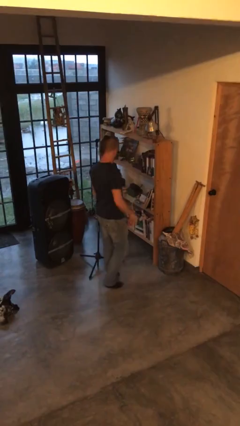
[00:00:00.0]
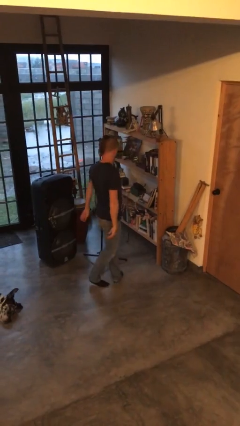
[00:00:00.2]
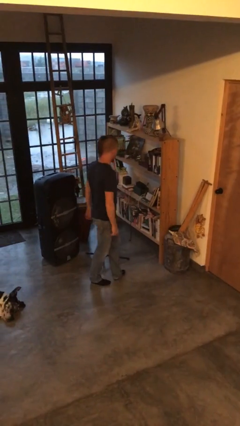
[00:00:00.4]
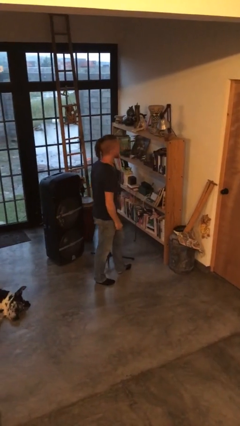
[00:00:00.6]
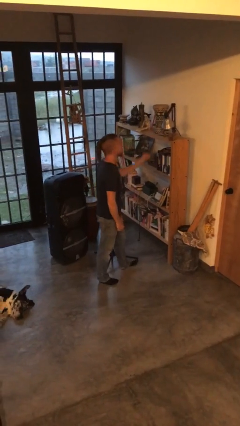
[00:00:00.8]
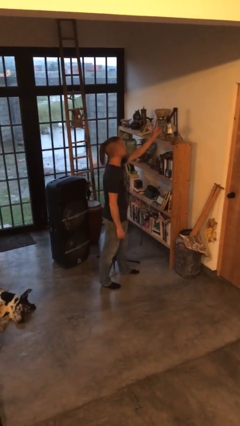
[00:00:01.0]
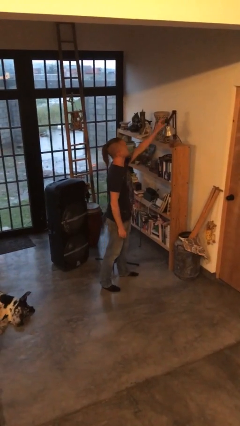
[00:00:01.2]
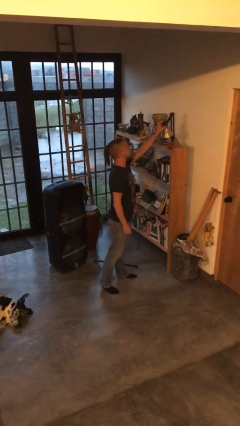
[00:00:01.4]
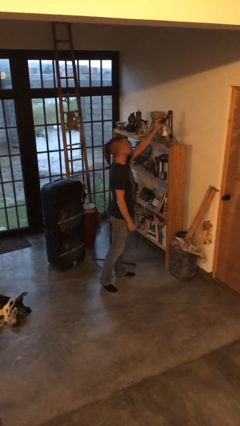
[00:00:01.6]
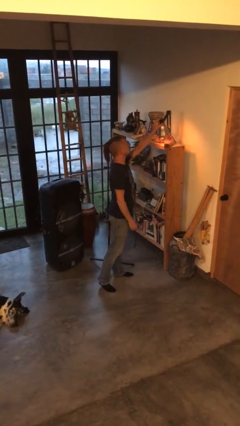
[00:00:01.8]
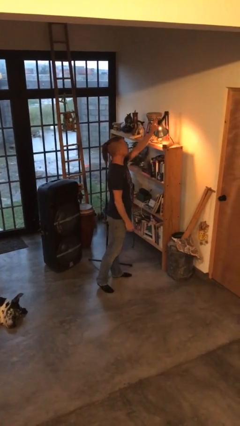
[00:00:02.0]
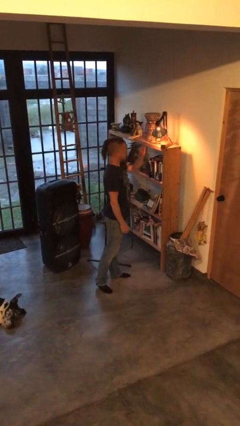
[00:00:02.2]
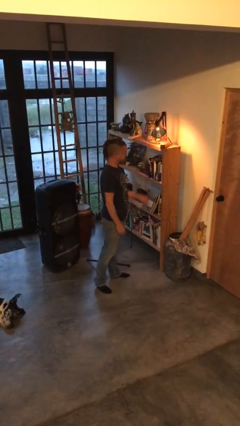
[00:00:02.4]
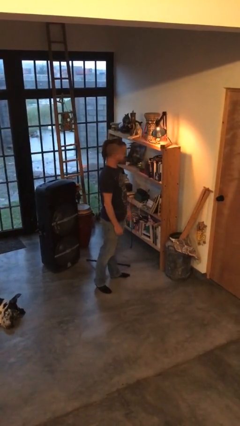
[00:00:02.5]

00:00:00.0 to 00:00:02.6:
person turns on lamp

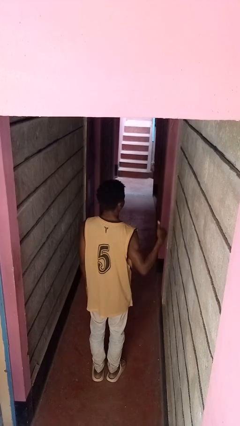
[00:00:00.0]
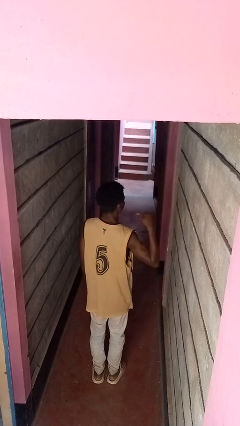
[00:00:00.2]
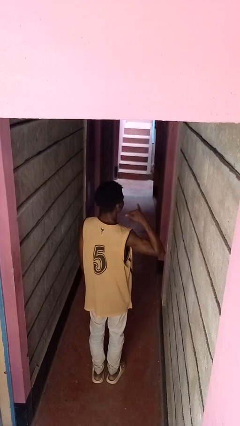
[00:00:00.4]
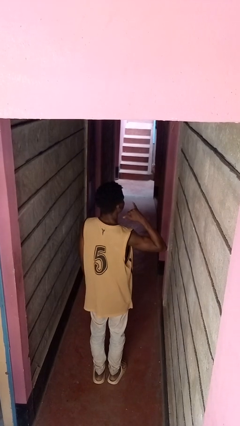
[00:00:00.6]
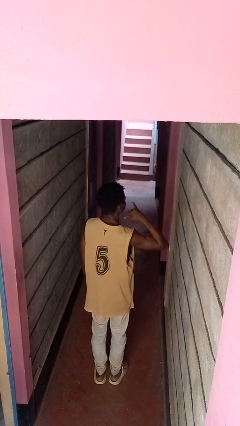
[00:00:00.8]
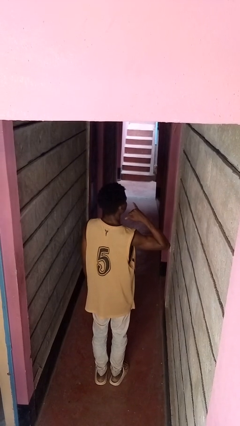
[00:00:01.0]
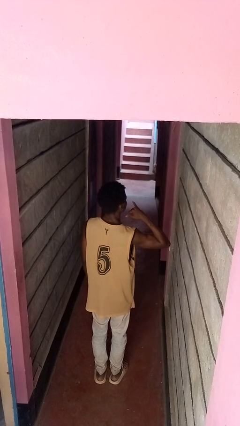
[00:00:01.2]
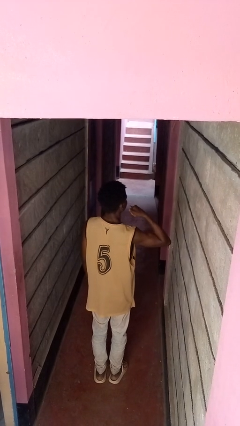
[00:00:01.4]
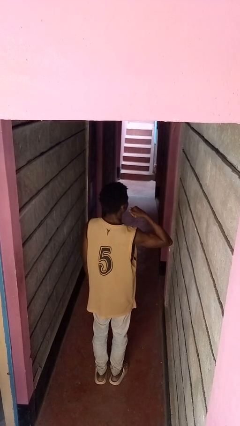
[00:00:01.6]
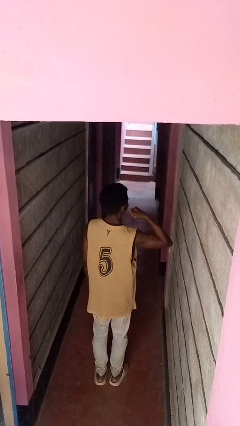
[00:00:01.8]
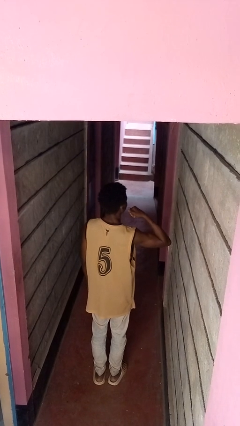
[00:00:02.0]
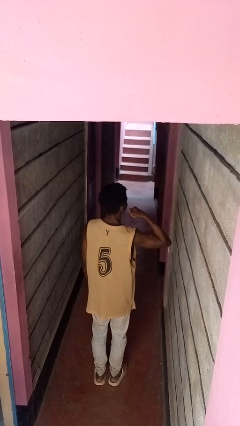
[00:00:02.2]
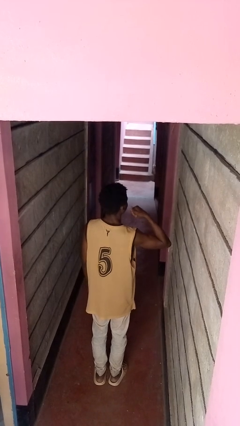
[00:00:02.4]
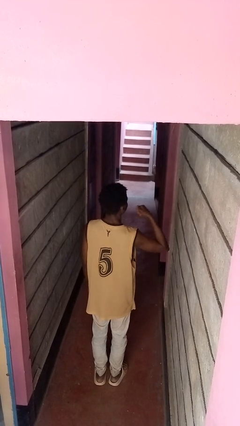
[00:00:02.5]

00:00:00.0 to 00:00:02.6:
person gestures call me

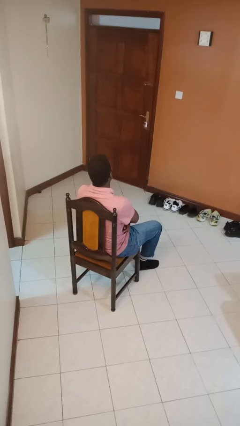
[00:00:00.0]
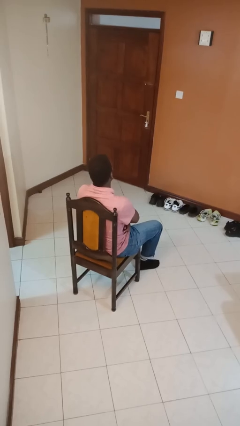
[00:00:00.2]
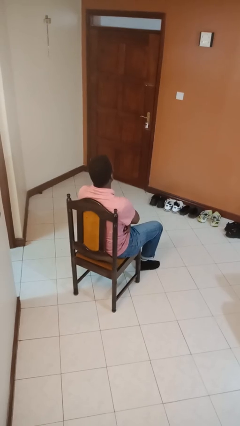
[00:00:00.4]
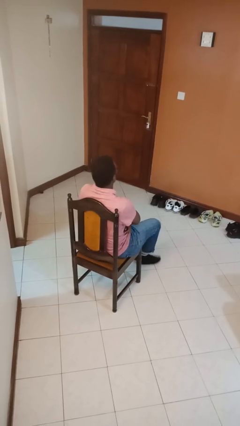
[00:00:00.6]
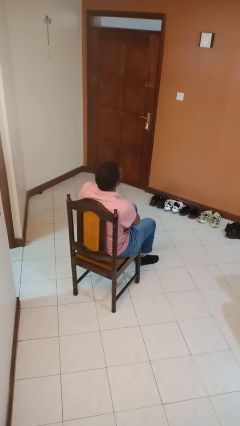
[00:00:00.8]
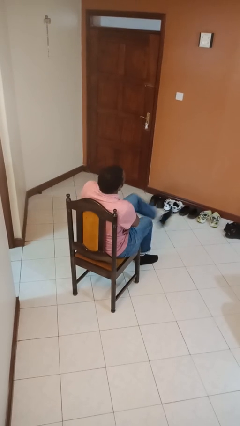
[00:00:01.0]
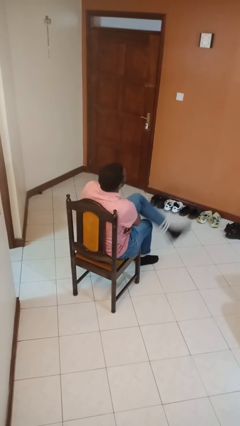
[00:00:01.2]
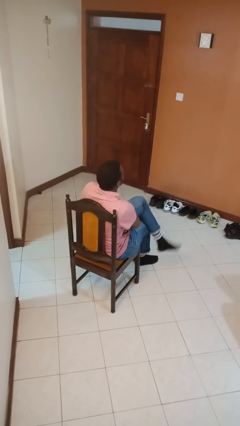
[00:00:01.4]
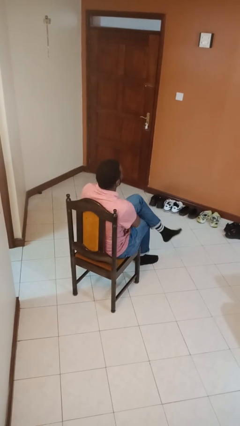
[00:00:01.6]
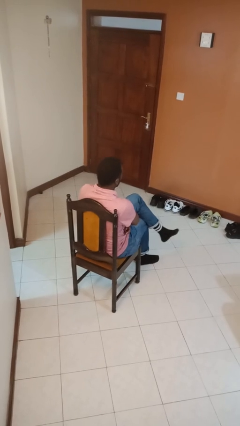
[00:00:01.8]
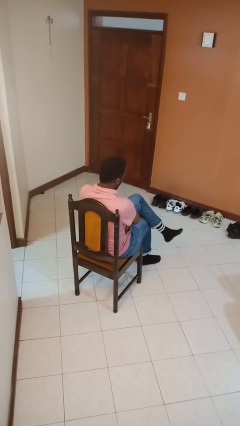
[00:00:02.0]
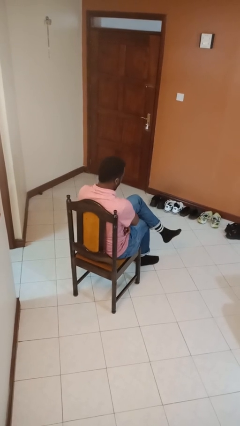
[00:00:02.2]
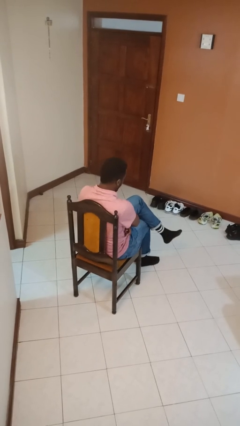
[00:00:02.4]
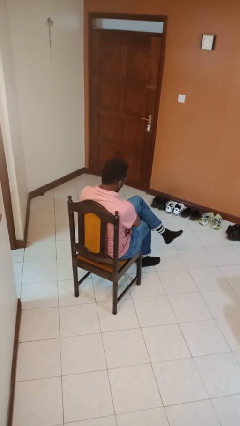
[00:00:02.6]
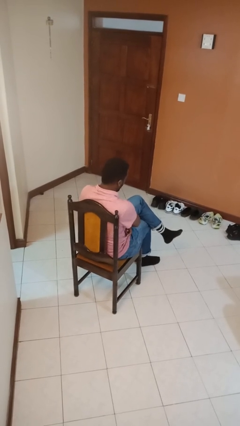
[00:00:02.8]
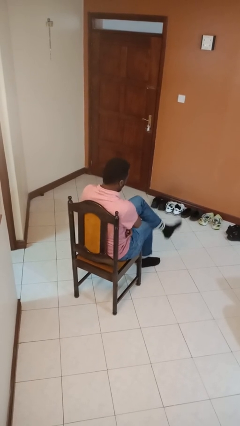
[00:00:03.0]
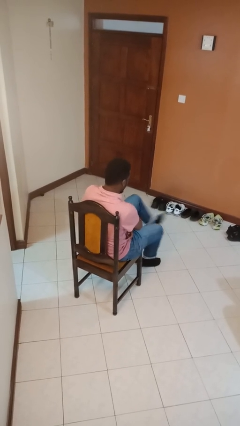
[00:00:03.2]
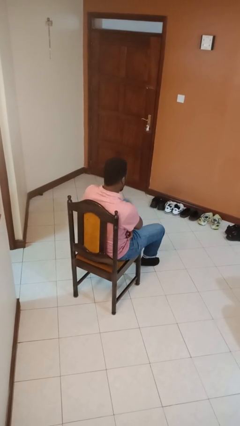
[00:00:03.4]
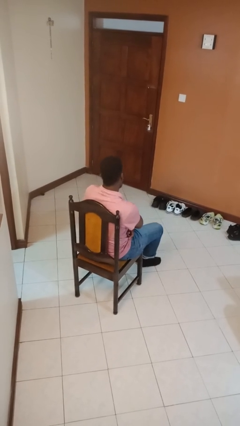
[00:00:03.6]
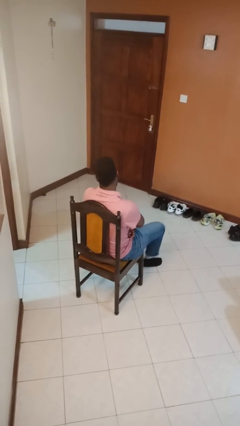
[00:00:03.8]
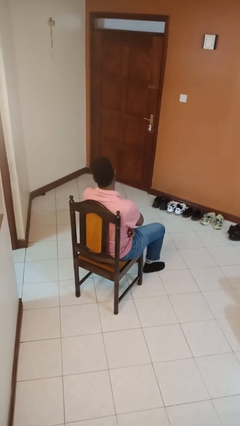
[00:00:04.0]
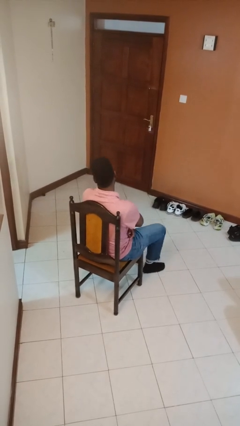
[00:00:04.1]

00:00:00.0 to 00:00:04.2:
person crosses legs

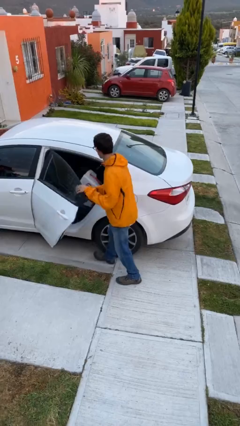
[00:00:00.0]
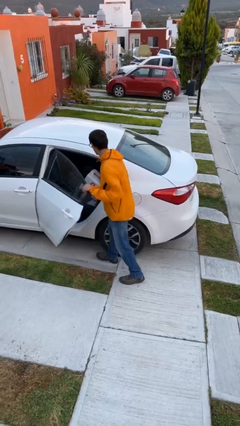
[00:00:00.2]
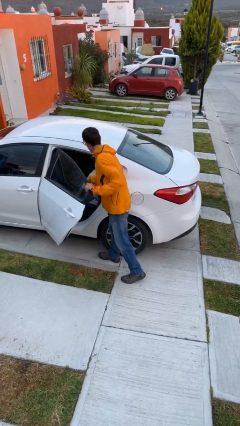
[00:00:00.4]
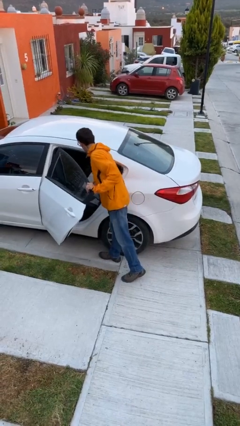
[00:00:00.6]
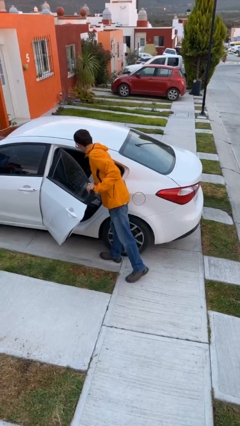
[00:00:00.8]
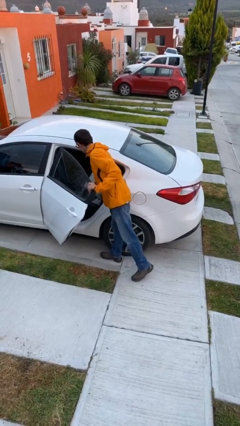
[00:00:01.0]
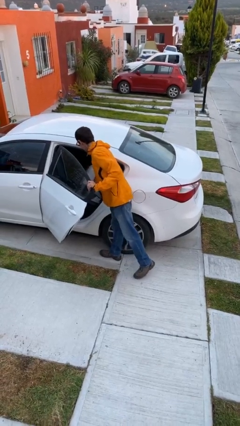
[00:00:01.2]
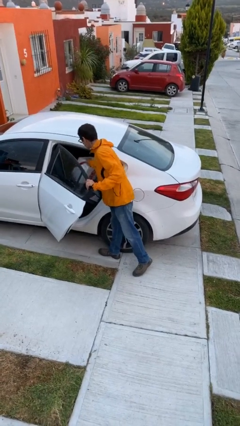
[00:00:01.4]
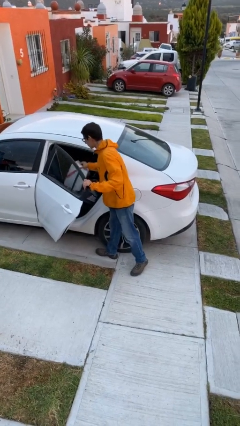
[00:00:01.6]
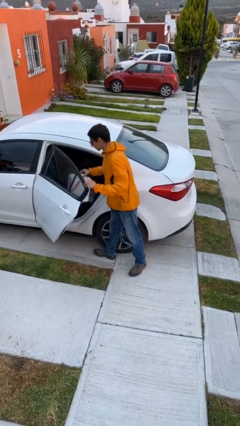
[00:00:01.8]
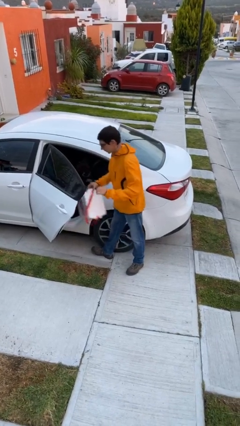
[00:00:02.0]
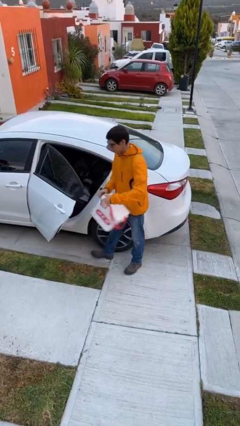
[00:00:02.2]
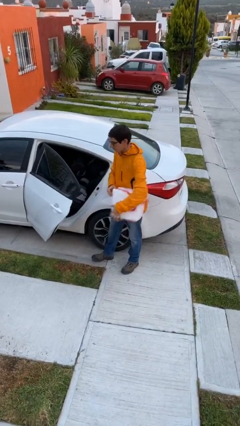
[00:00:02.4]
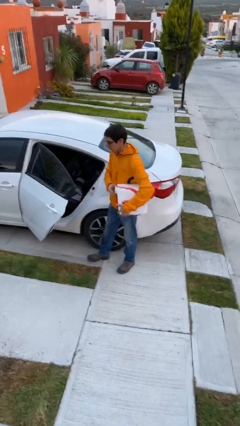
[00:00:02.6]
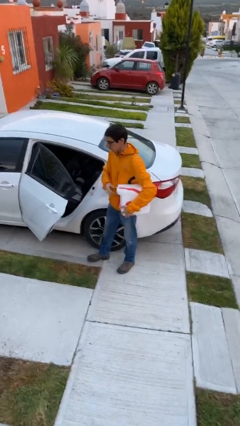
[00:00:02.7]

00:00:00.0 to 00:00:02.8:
person unloads car

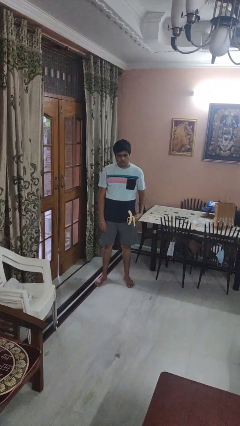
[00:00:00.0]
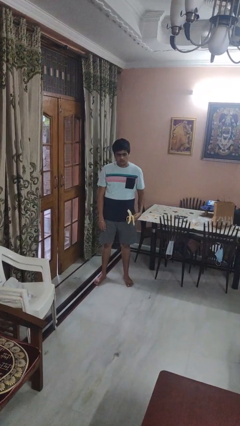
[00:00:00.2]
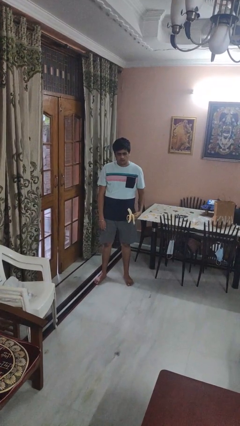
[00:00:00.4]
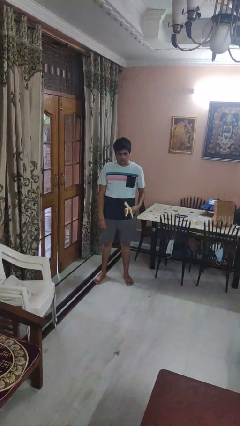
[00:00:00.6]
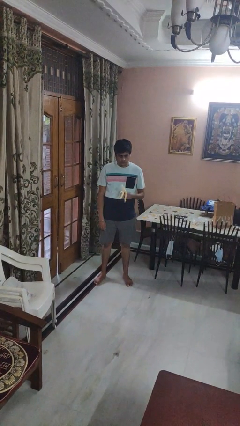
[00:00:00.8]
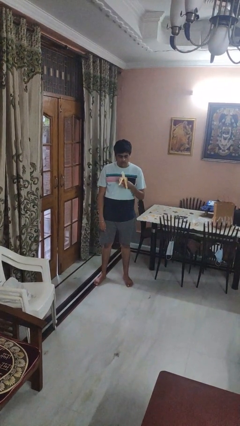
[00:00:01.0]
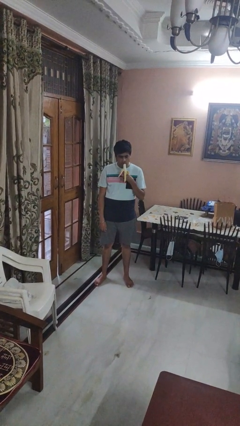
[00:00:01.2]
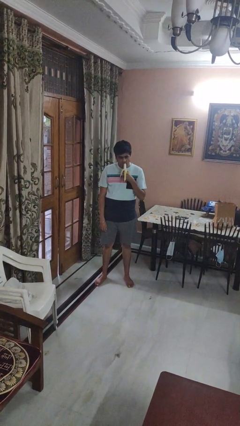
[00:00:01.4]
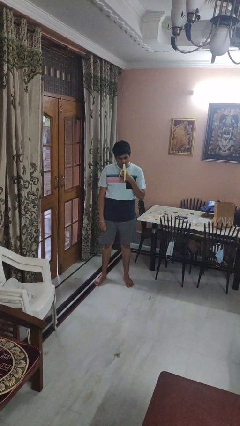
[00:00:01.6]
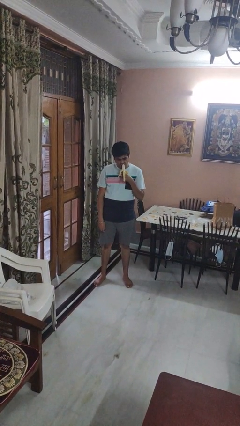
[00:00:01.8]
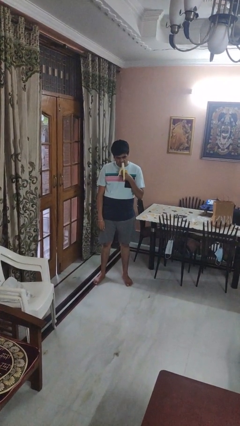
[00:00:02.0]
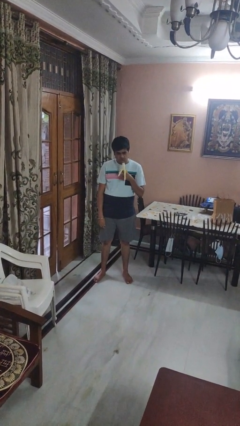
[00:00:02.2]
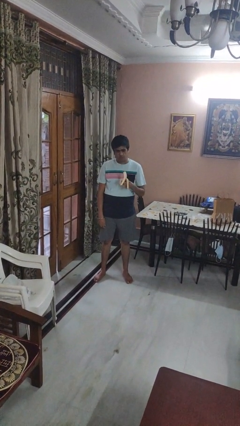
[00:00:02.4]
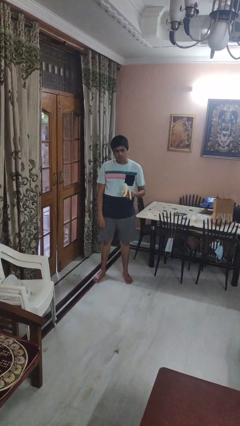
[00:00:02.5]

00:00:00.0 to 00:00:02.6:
person eats banana

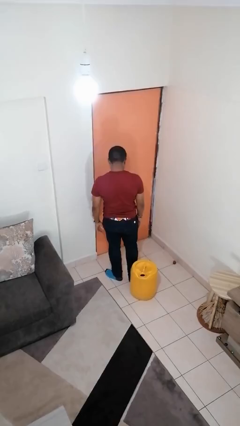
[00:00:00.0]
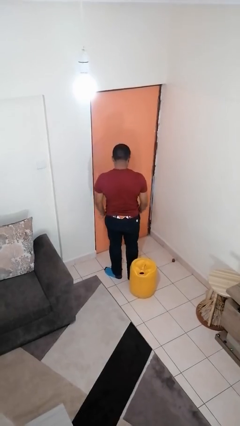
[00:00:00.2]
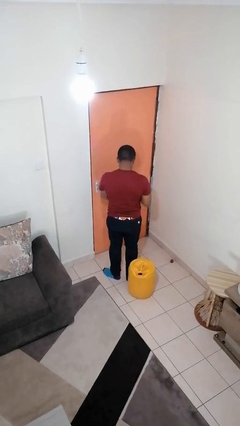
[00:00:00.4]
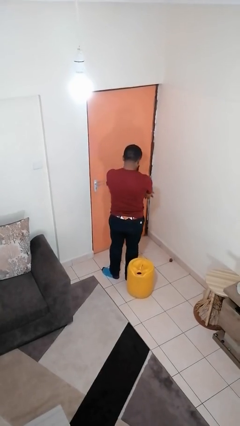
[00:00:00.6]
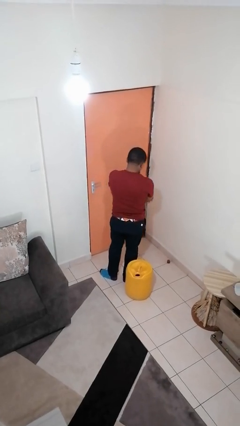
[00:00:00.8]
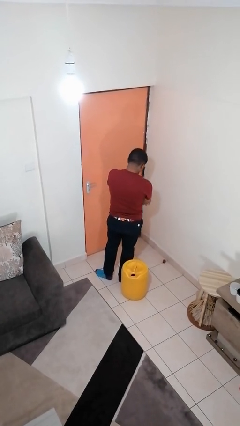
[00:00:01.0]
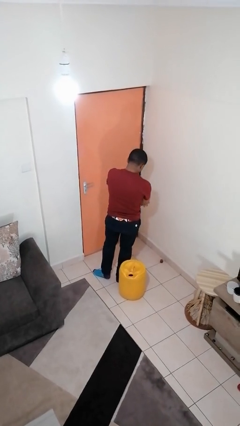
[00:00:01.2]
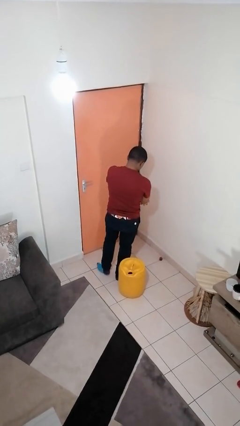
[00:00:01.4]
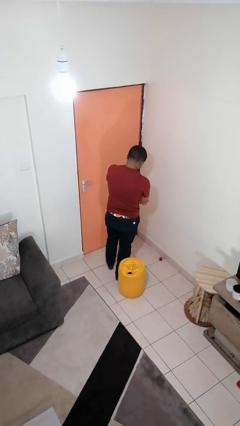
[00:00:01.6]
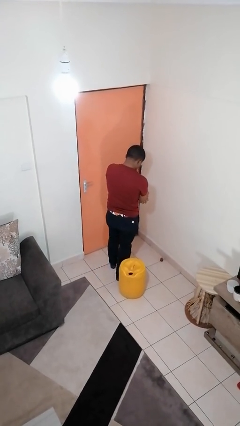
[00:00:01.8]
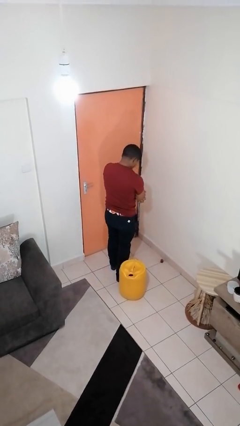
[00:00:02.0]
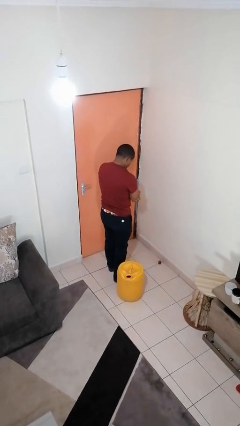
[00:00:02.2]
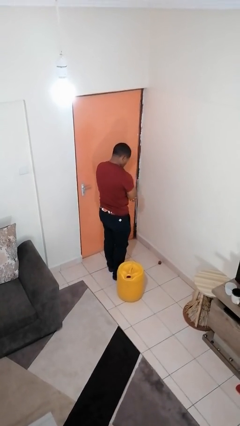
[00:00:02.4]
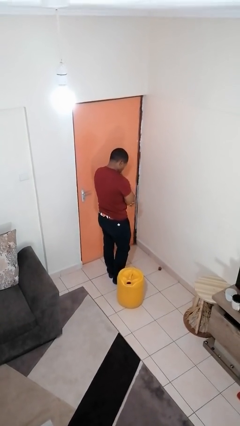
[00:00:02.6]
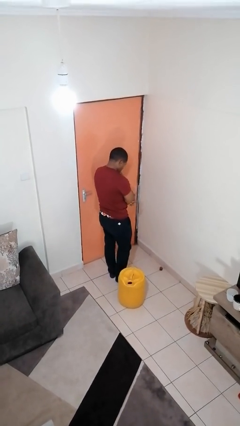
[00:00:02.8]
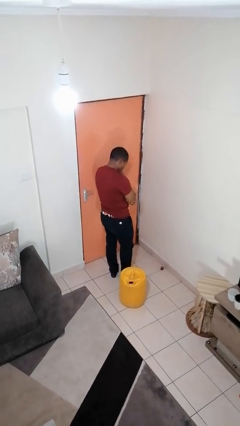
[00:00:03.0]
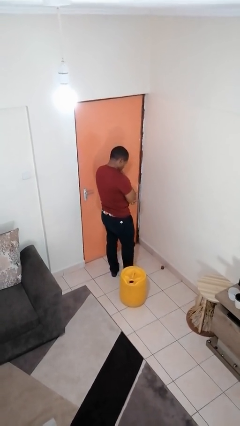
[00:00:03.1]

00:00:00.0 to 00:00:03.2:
person strokes chin
